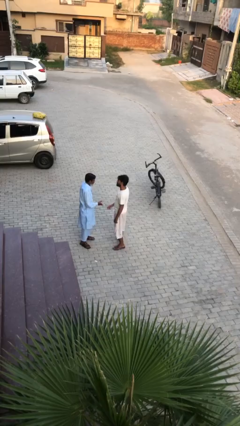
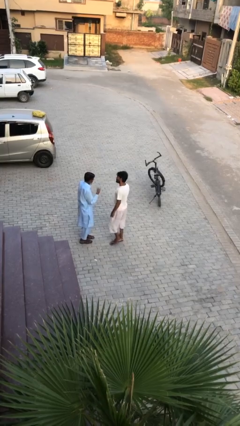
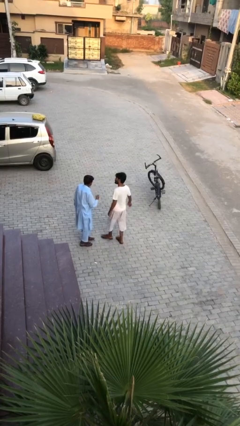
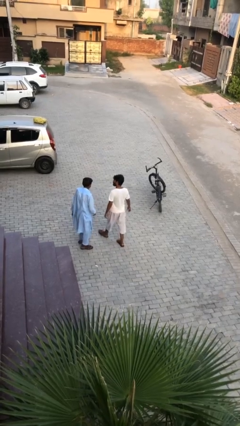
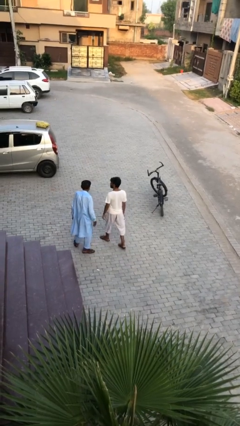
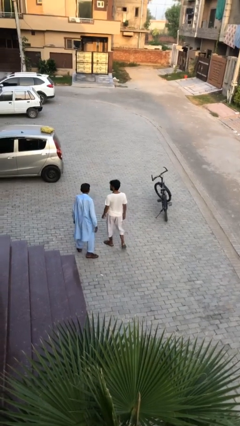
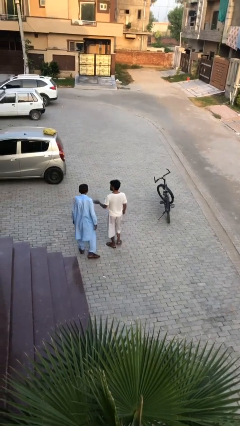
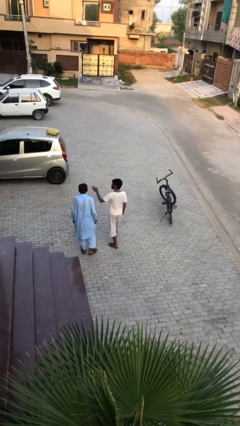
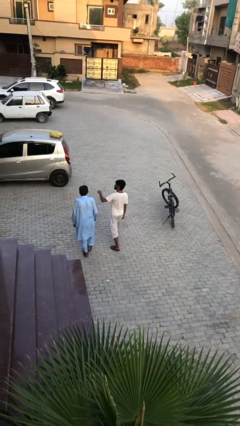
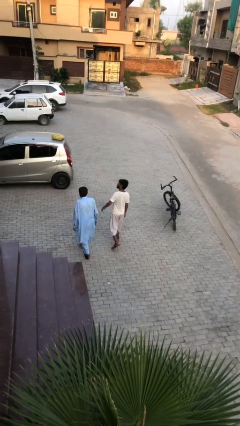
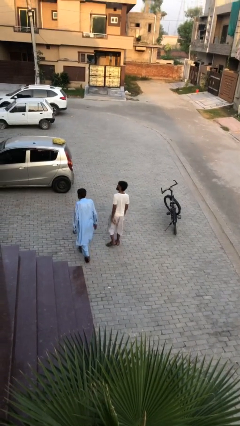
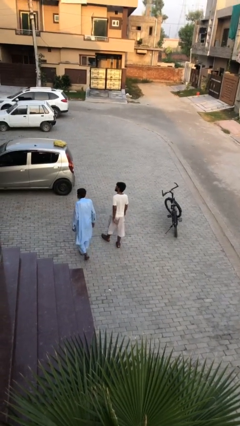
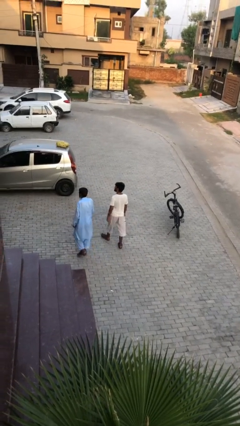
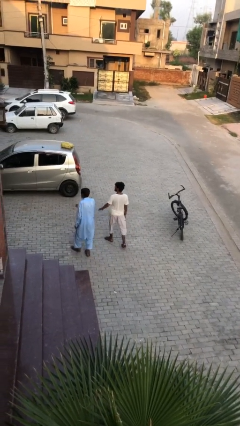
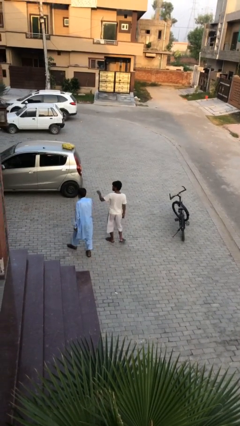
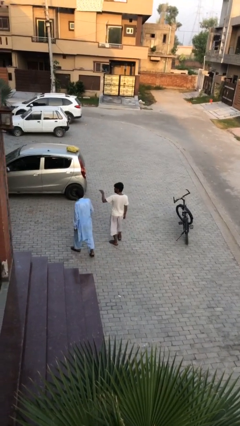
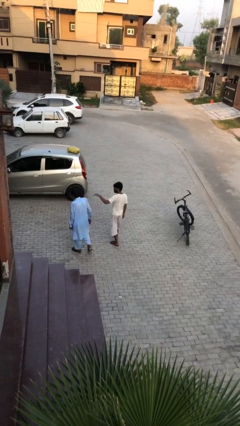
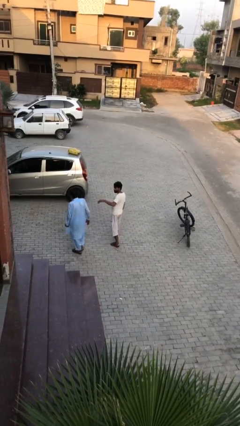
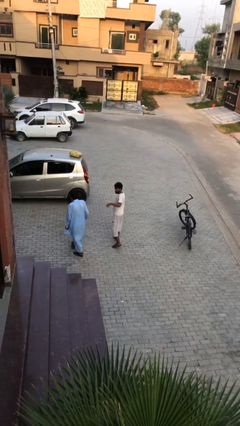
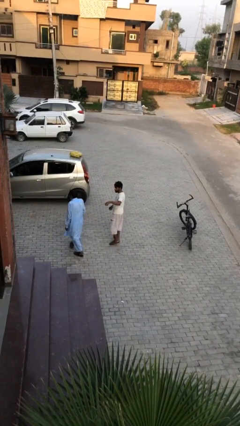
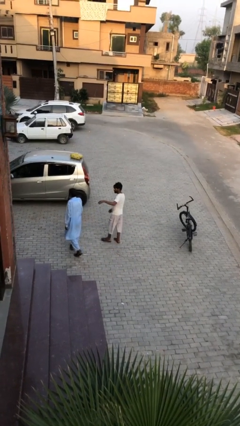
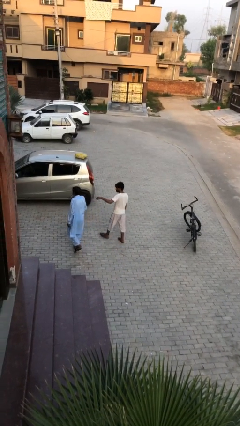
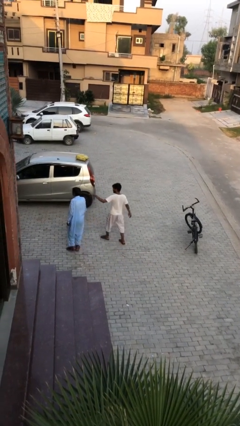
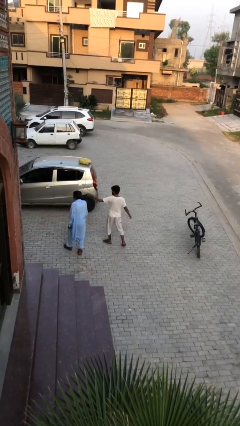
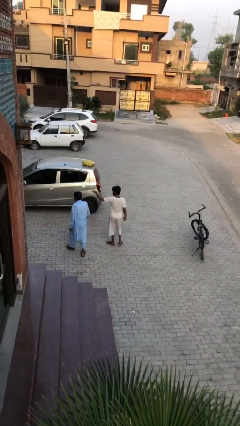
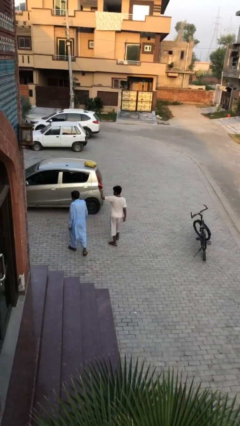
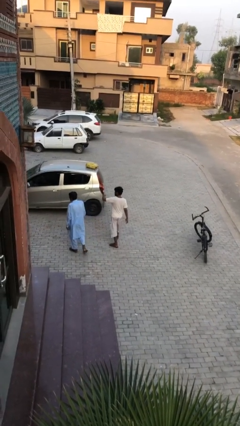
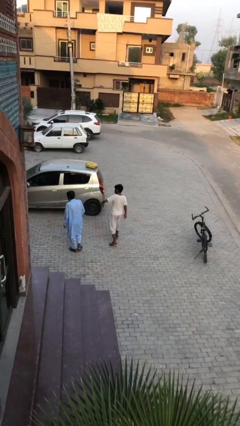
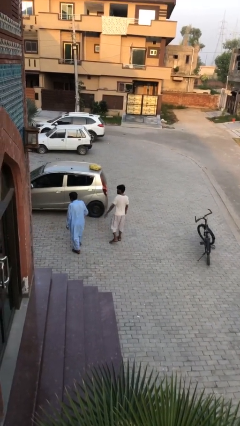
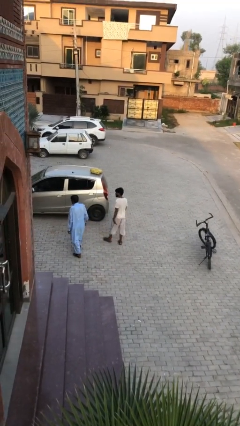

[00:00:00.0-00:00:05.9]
person talks to person

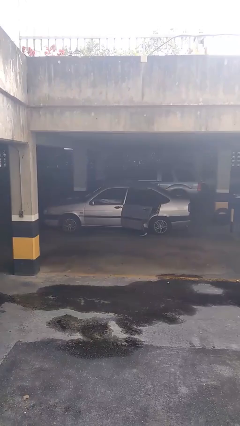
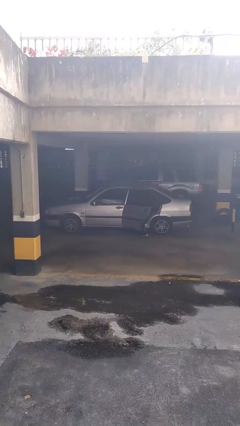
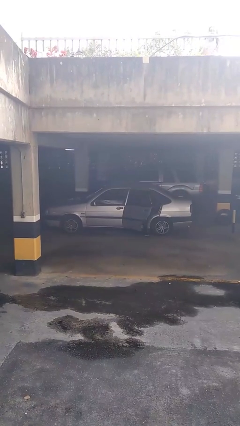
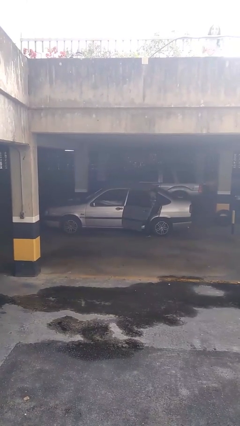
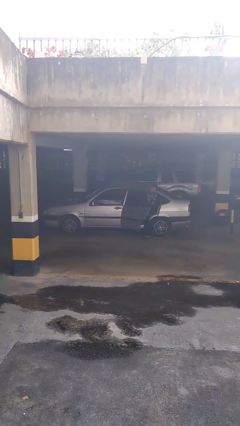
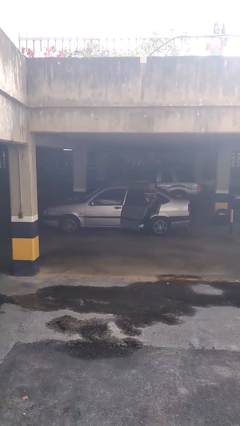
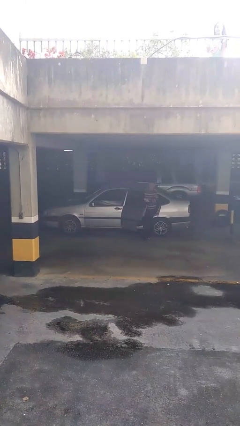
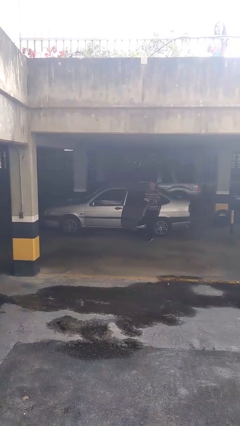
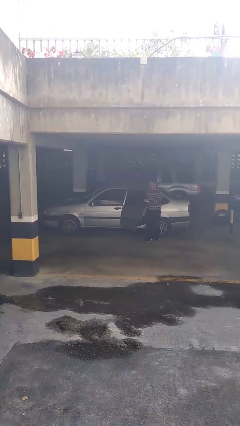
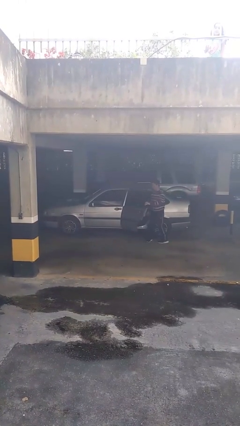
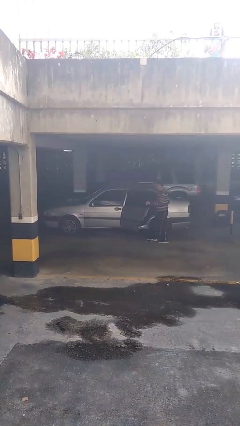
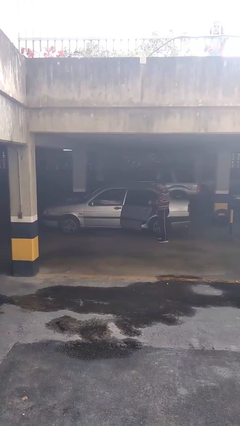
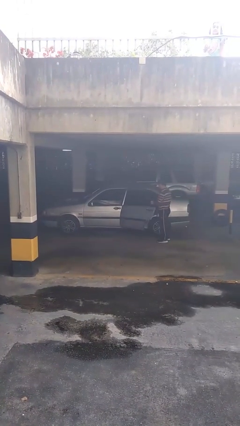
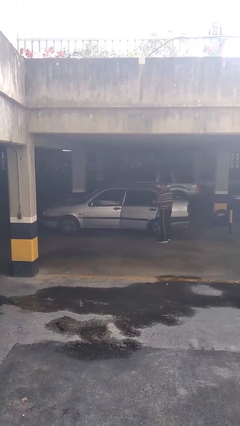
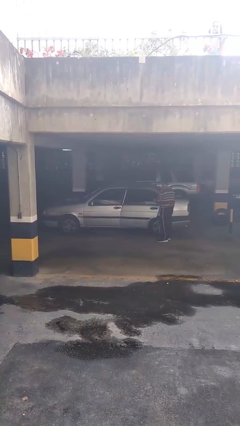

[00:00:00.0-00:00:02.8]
car drops off person

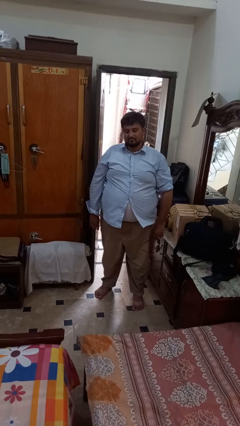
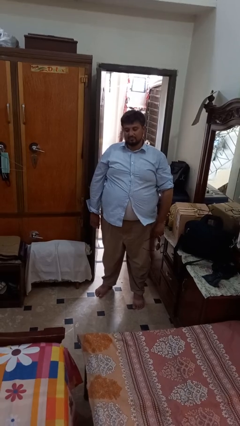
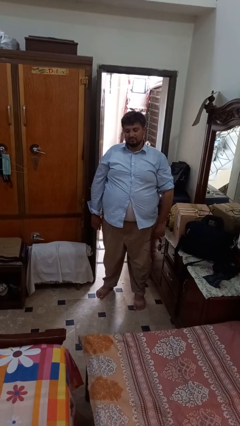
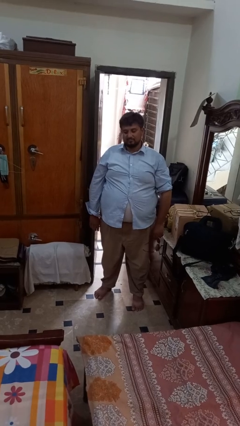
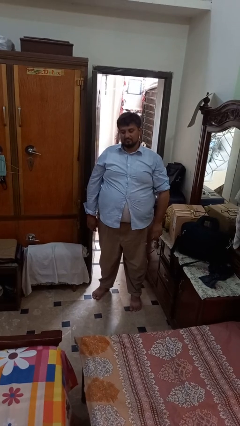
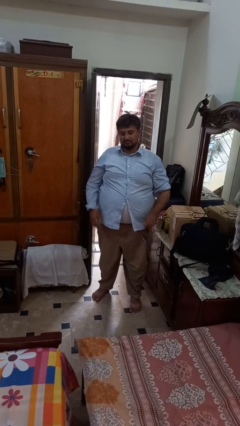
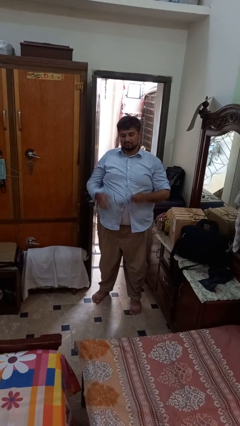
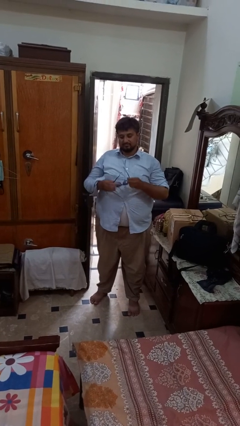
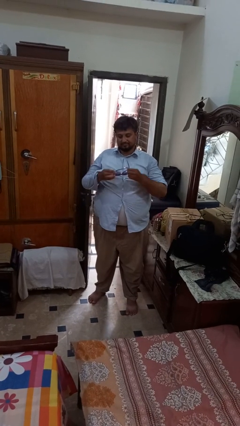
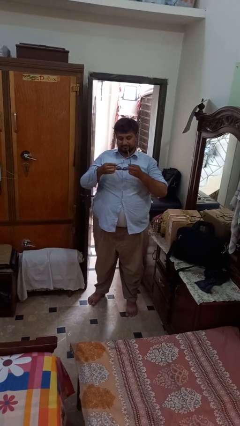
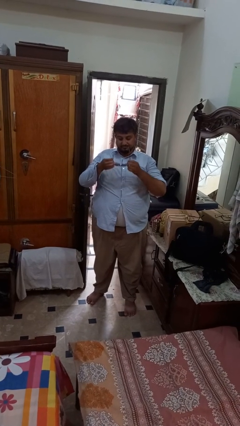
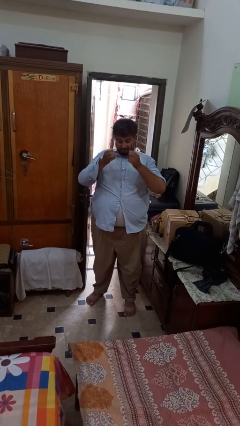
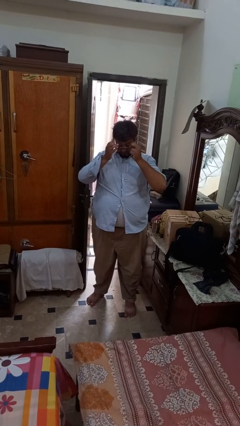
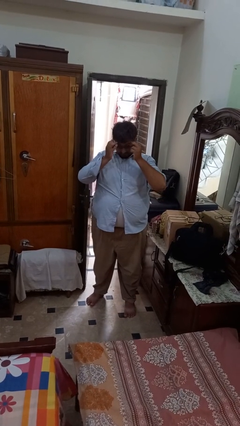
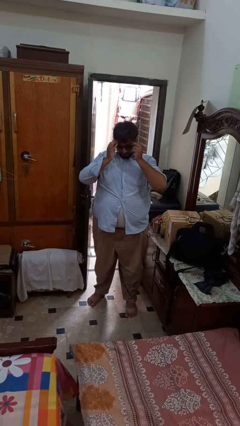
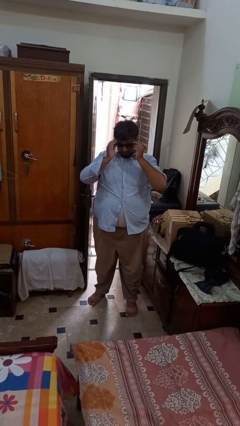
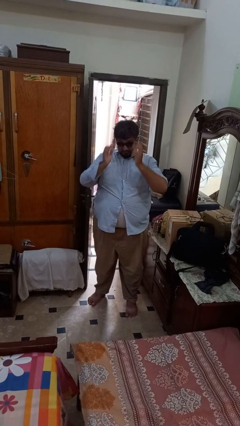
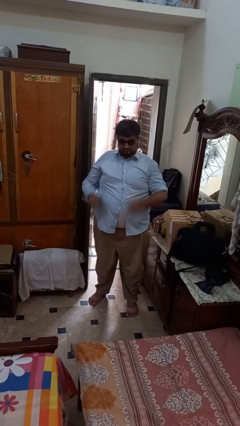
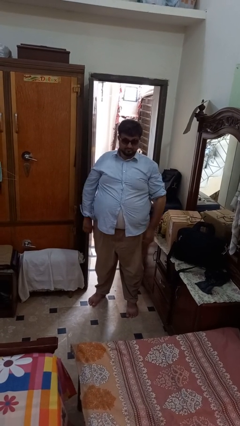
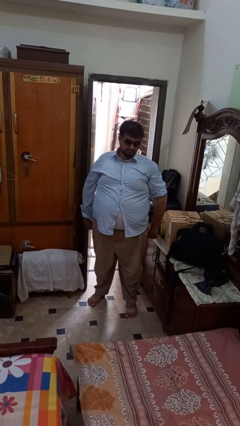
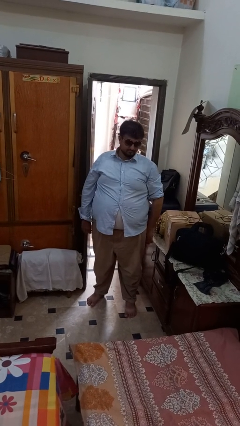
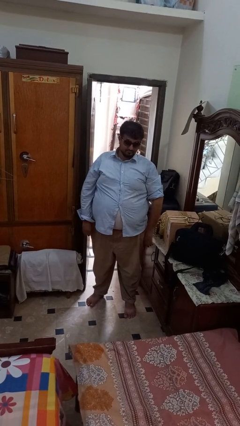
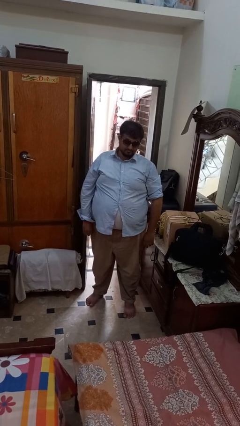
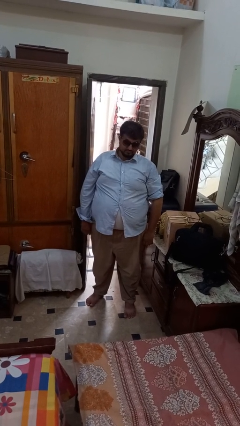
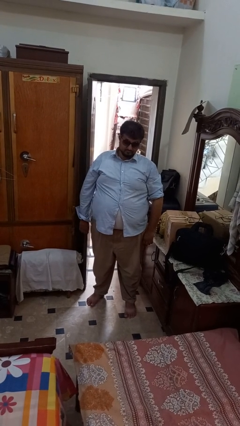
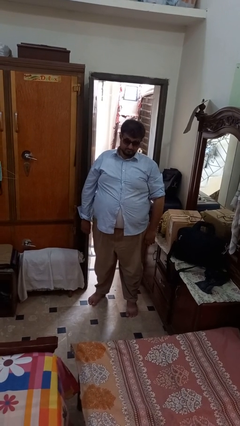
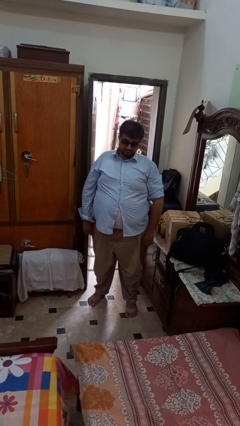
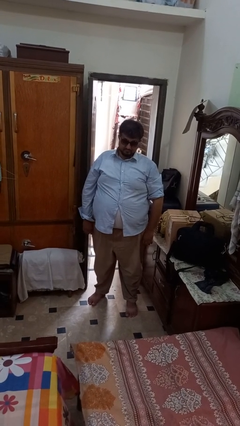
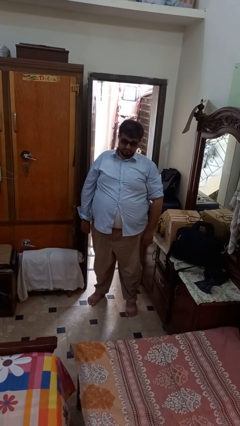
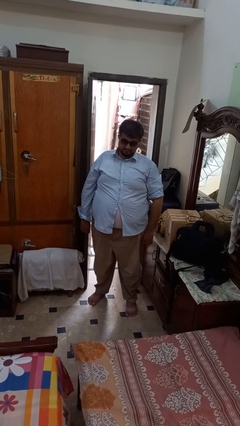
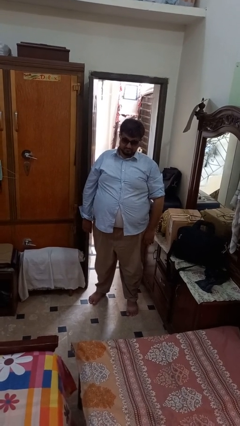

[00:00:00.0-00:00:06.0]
person puts on sunglasses

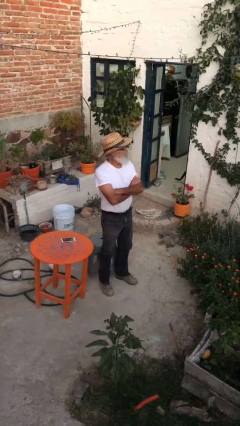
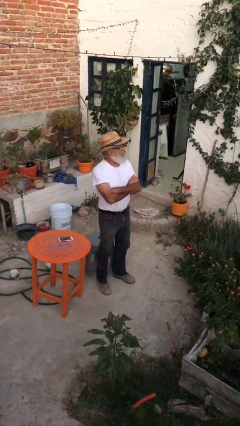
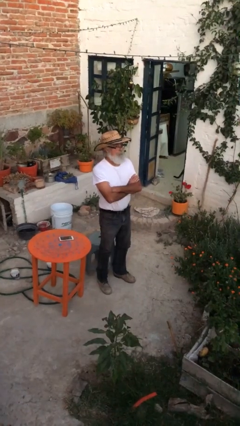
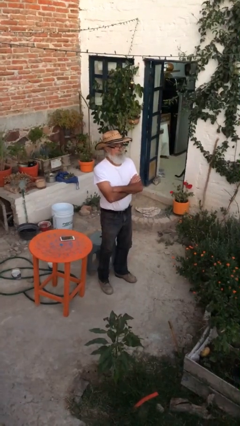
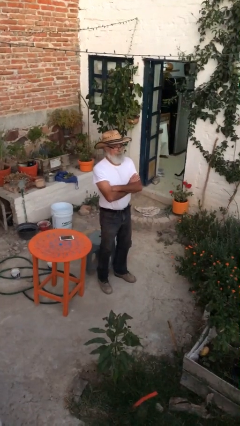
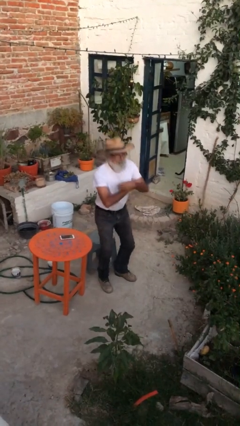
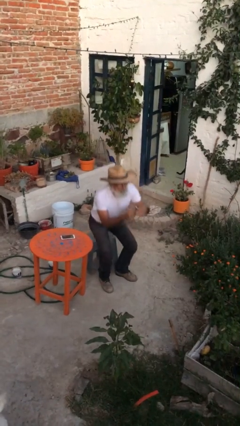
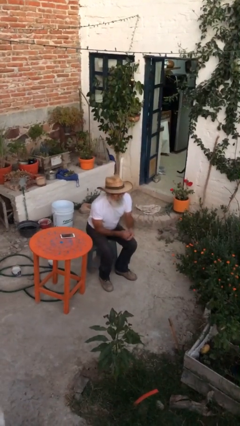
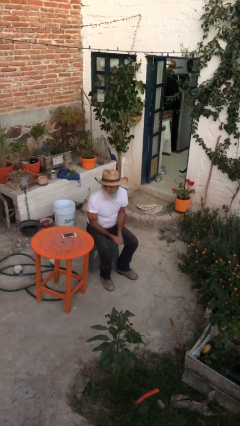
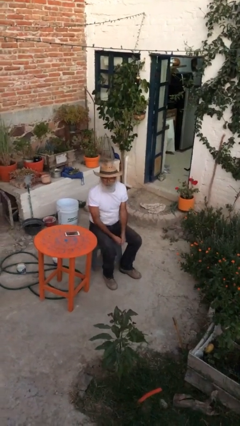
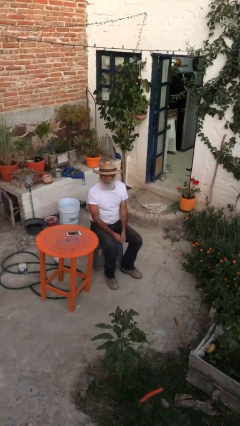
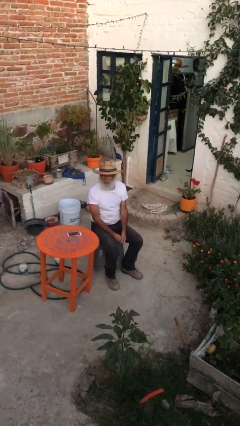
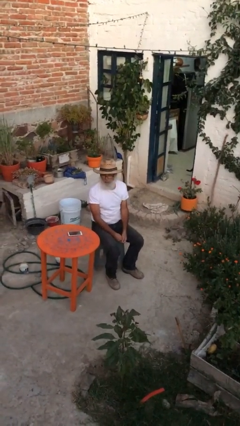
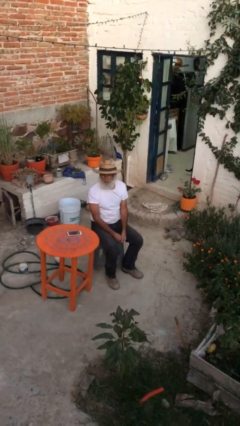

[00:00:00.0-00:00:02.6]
person sits down

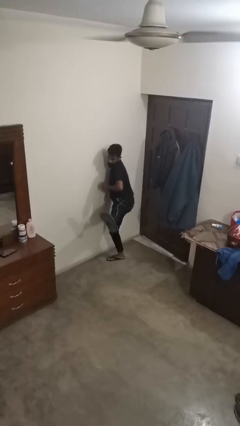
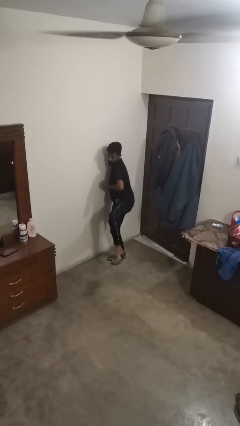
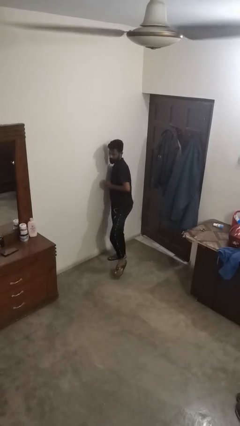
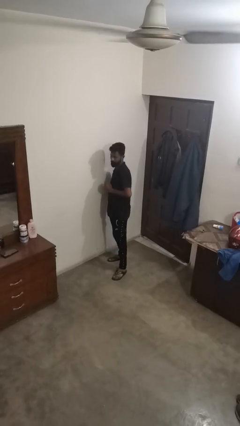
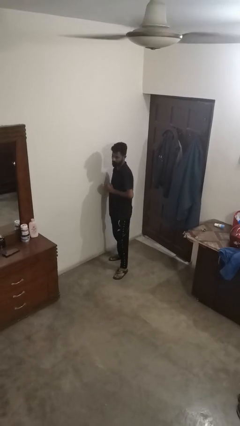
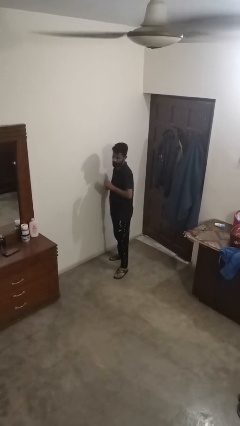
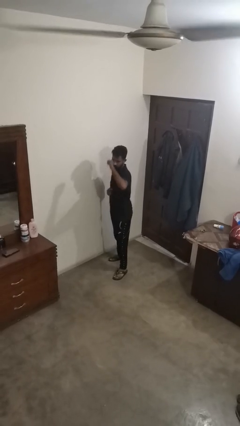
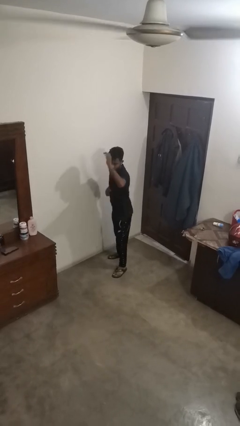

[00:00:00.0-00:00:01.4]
person karate kicks
